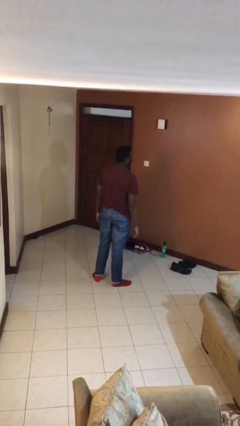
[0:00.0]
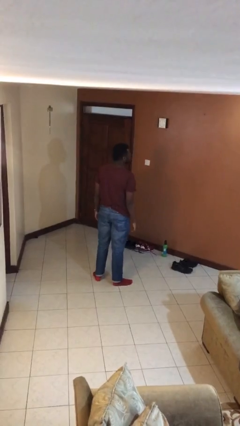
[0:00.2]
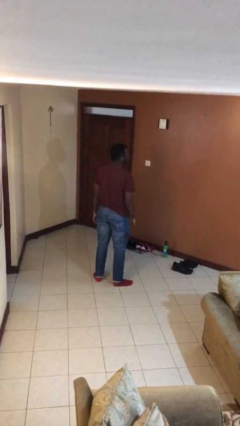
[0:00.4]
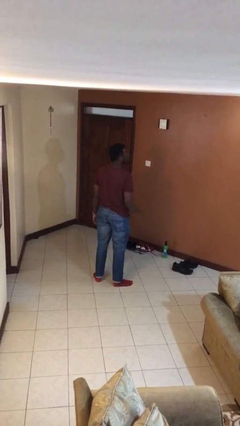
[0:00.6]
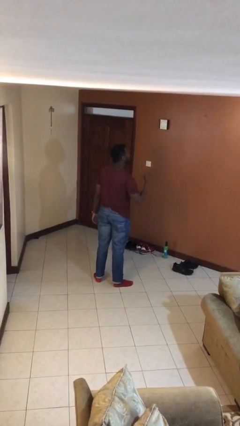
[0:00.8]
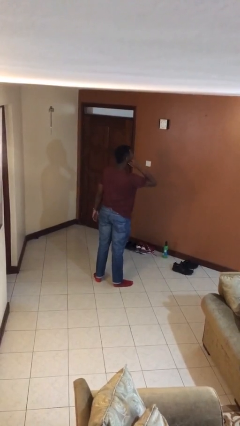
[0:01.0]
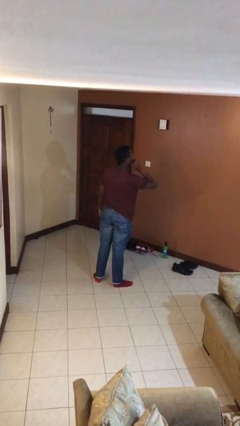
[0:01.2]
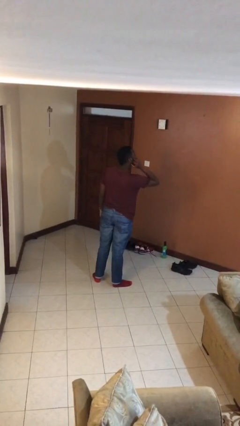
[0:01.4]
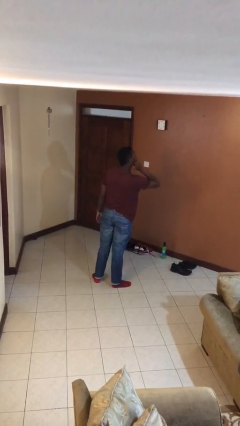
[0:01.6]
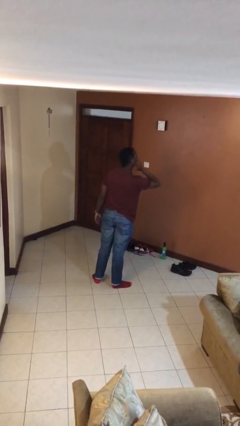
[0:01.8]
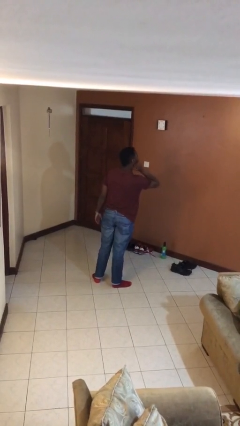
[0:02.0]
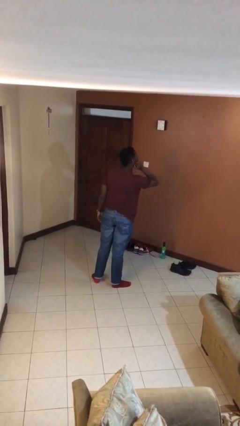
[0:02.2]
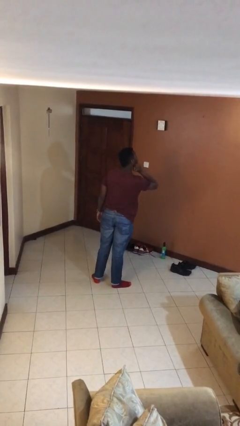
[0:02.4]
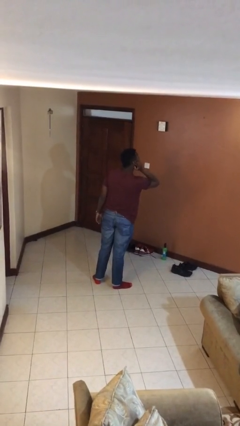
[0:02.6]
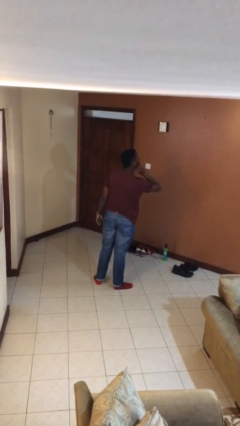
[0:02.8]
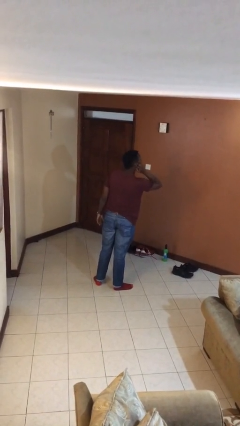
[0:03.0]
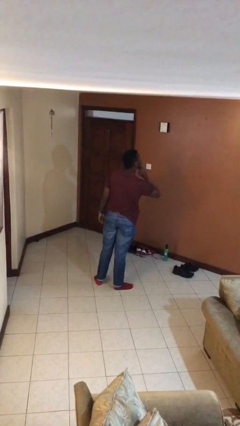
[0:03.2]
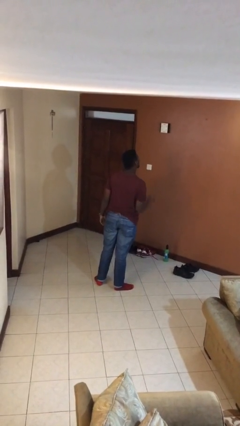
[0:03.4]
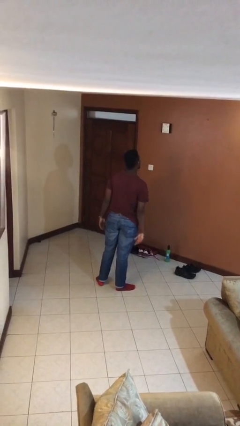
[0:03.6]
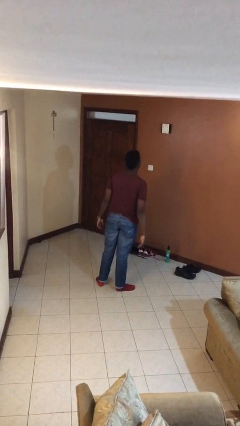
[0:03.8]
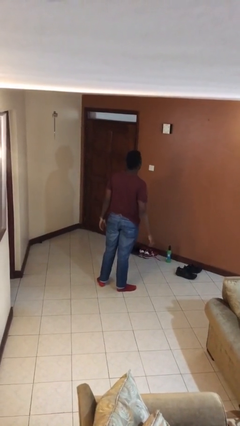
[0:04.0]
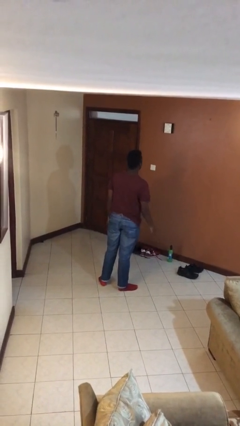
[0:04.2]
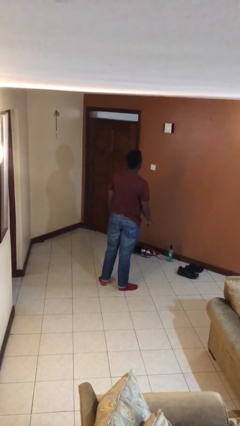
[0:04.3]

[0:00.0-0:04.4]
person scratches face

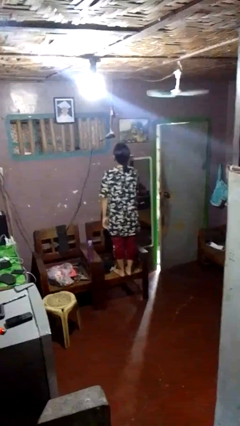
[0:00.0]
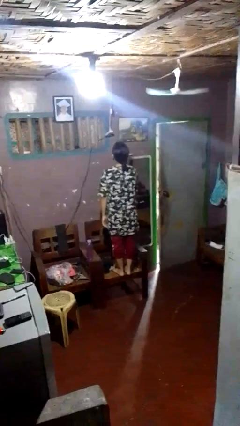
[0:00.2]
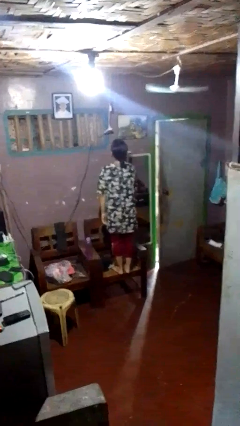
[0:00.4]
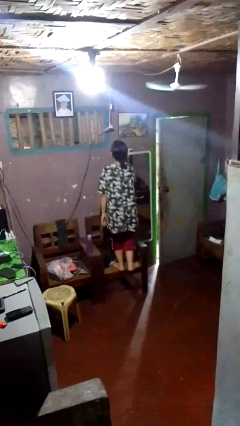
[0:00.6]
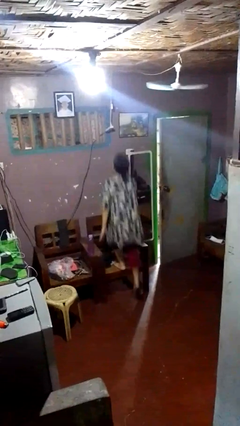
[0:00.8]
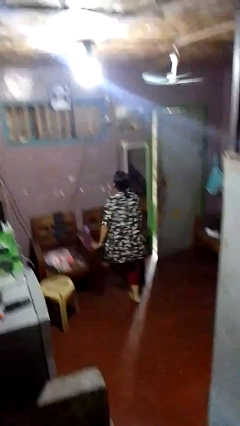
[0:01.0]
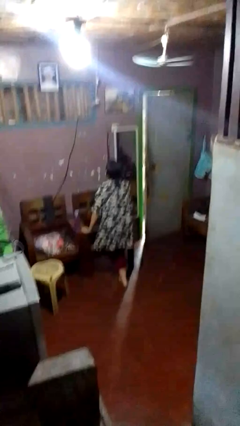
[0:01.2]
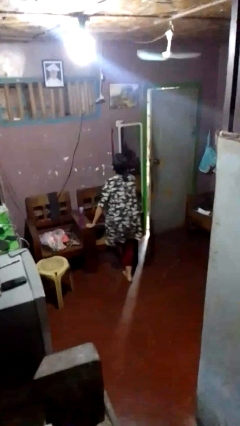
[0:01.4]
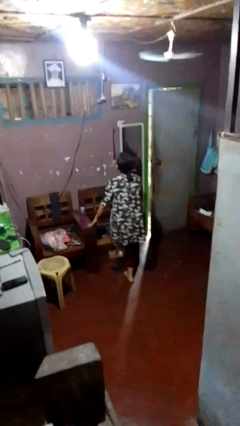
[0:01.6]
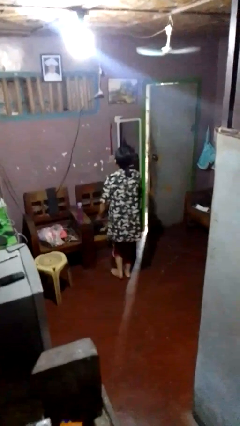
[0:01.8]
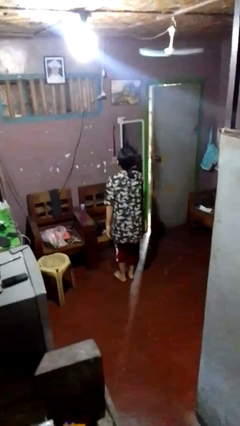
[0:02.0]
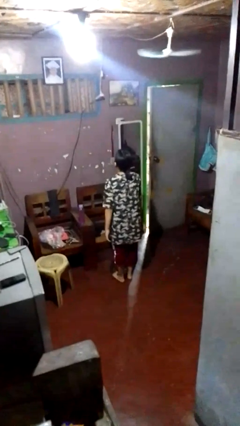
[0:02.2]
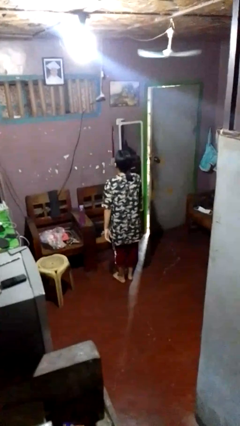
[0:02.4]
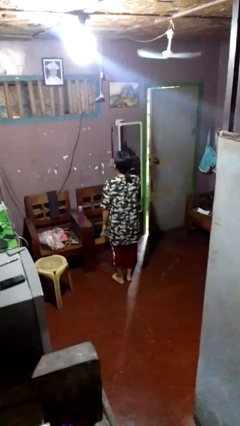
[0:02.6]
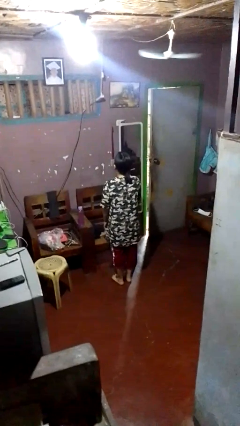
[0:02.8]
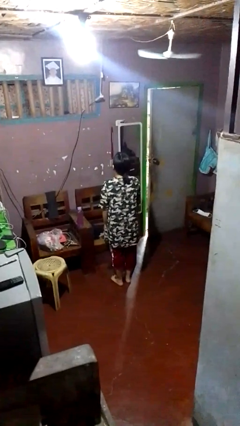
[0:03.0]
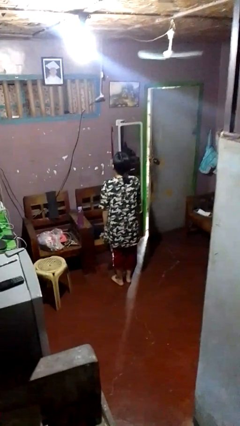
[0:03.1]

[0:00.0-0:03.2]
person climbs off chair

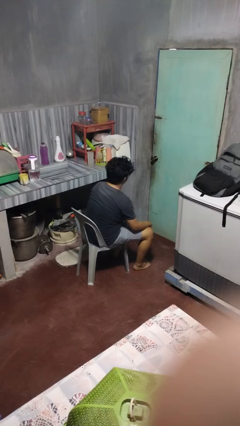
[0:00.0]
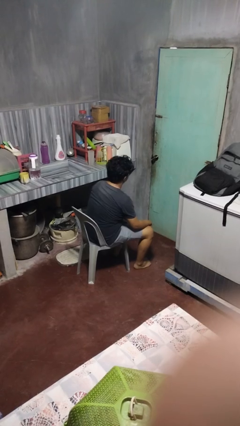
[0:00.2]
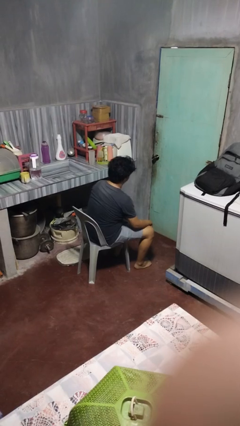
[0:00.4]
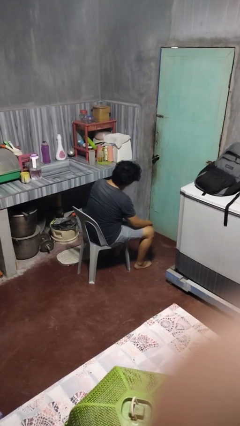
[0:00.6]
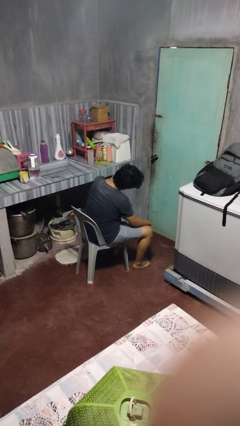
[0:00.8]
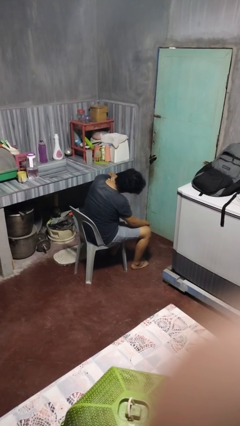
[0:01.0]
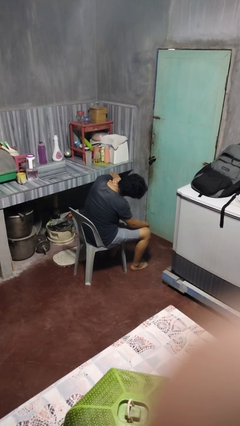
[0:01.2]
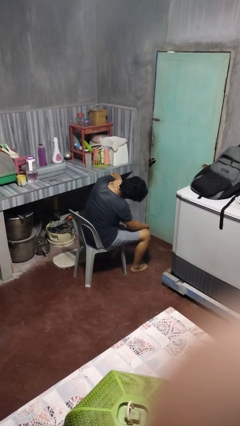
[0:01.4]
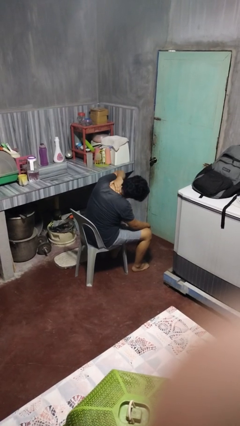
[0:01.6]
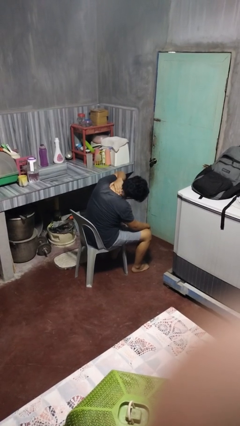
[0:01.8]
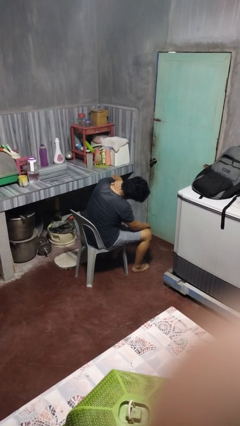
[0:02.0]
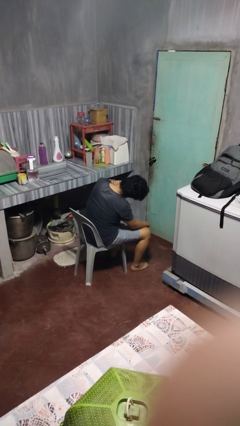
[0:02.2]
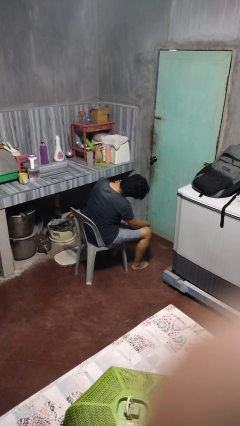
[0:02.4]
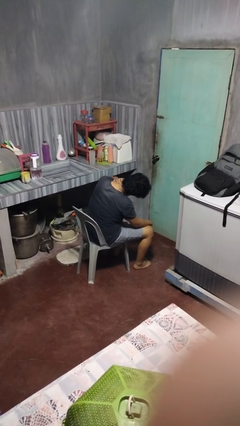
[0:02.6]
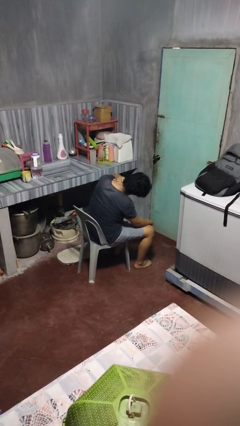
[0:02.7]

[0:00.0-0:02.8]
person rubs neck

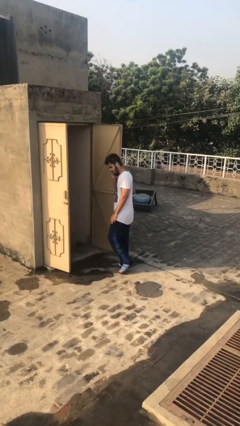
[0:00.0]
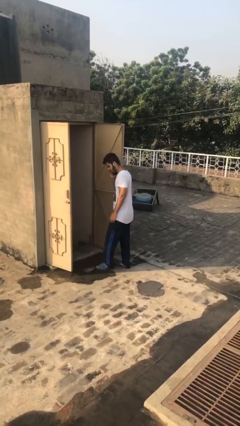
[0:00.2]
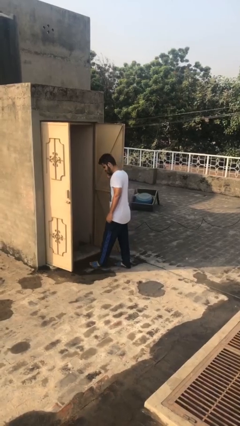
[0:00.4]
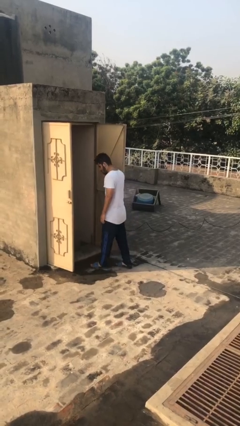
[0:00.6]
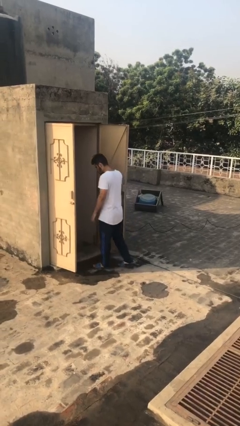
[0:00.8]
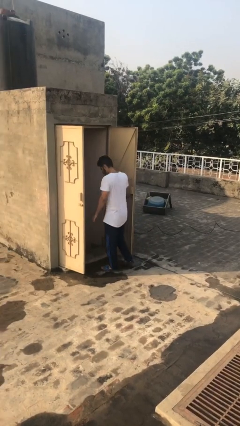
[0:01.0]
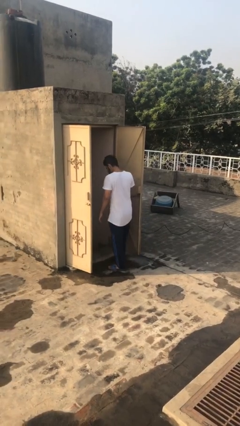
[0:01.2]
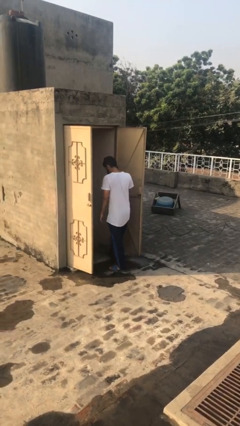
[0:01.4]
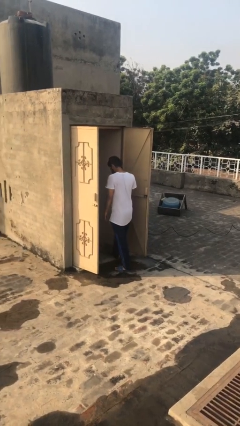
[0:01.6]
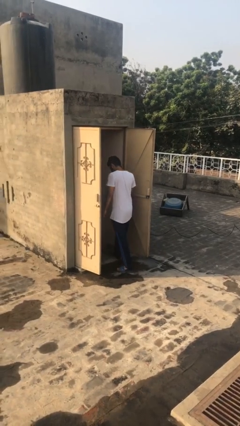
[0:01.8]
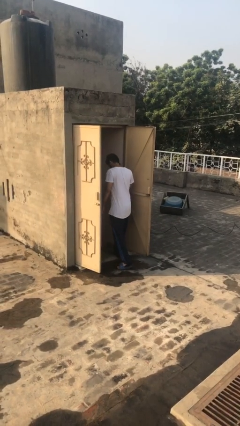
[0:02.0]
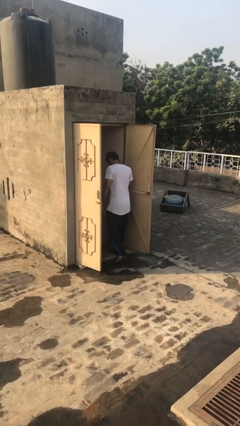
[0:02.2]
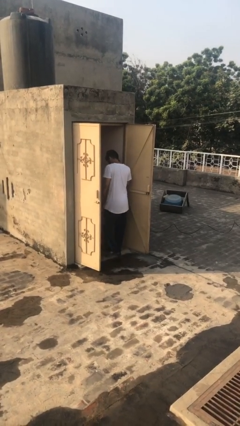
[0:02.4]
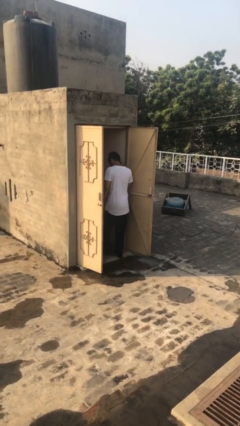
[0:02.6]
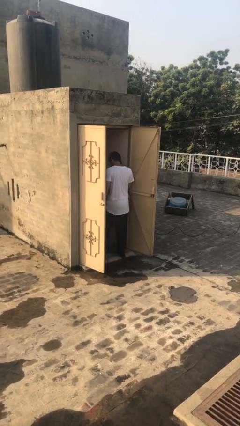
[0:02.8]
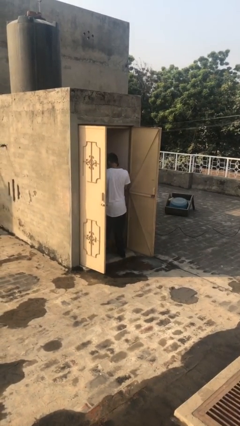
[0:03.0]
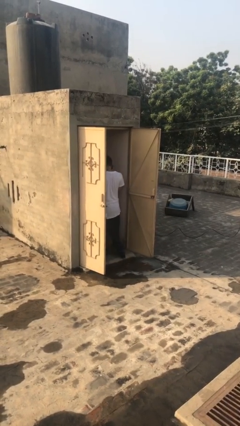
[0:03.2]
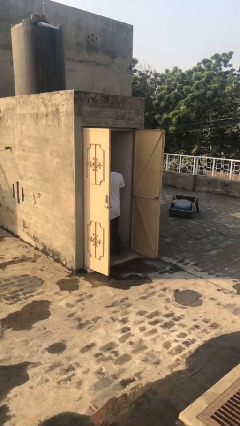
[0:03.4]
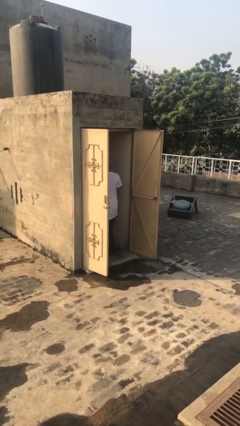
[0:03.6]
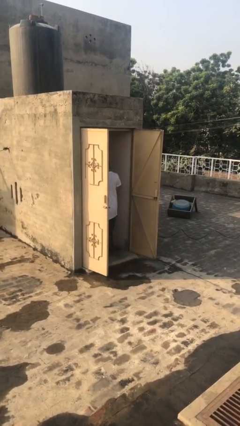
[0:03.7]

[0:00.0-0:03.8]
person exits scene through structure

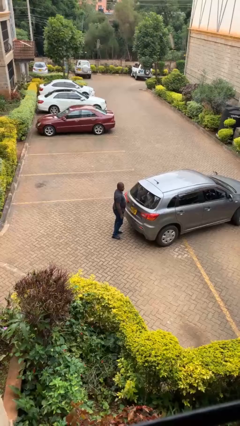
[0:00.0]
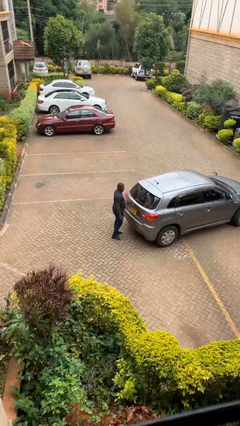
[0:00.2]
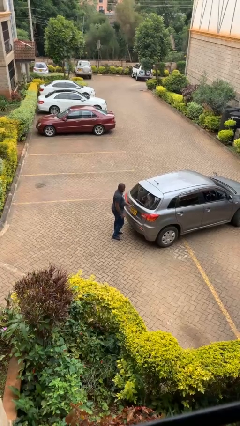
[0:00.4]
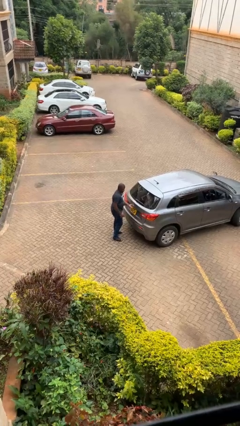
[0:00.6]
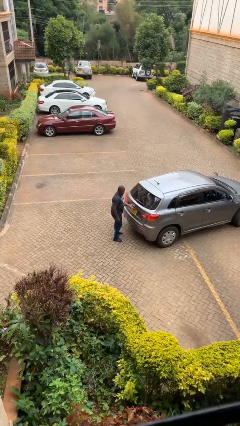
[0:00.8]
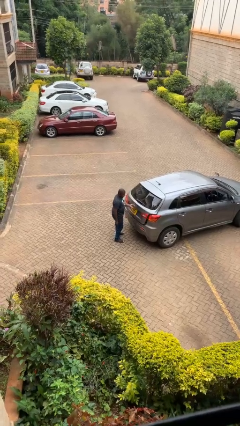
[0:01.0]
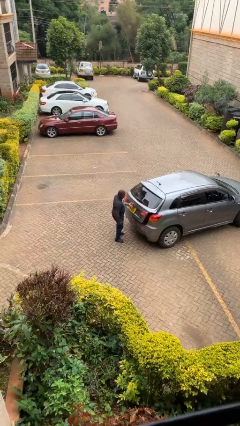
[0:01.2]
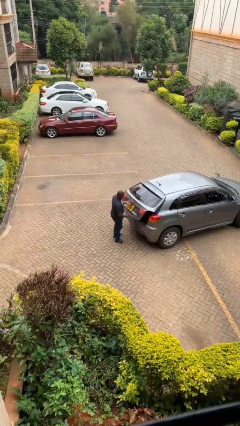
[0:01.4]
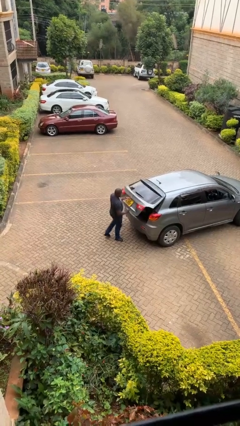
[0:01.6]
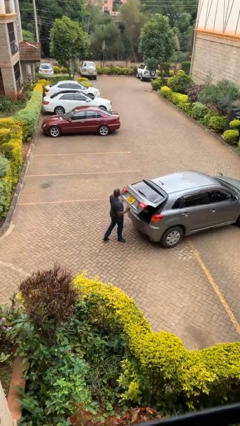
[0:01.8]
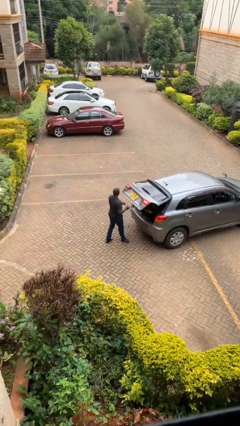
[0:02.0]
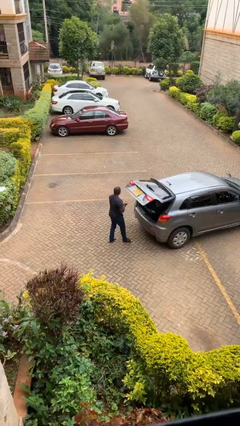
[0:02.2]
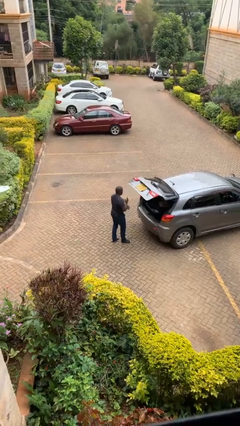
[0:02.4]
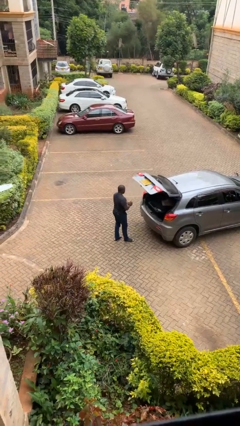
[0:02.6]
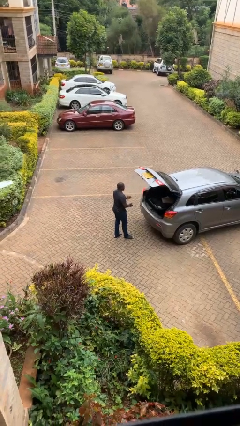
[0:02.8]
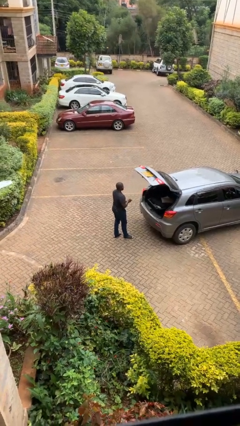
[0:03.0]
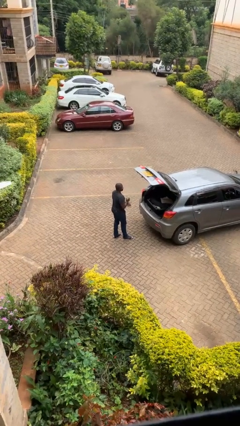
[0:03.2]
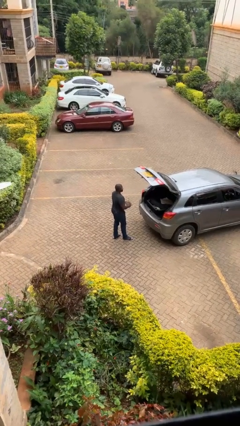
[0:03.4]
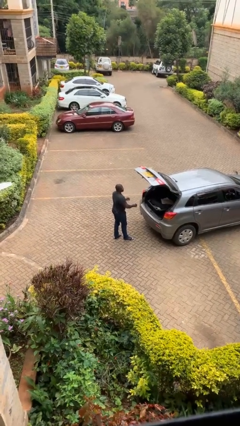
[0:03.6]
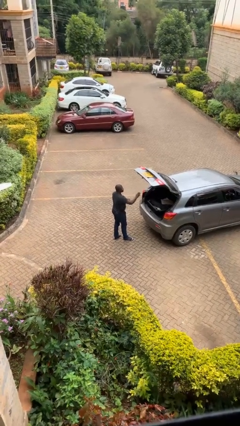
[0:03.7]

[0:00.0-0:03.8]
person opens car trunk
